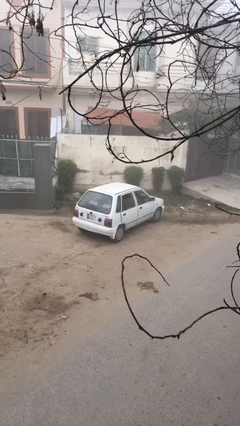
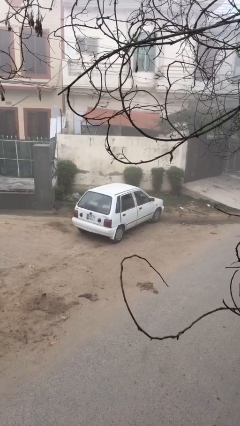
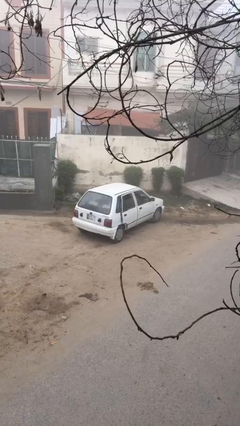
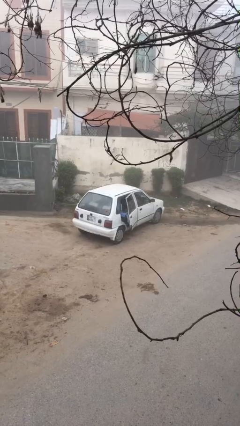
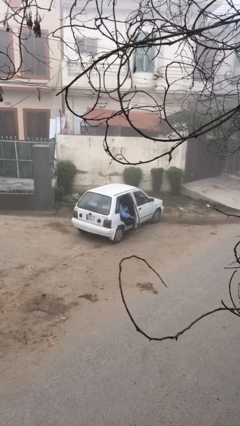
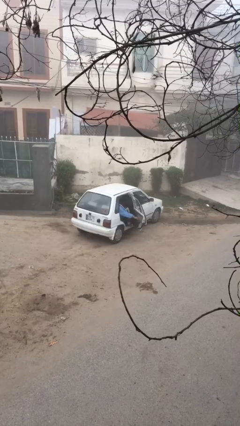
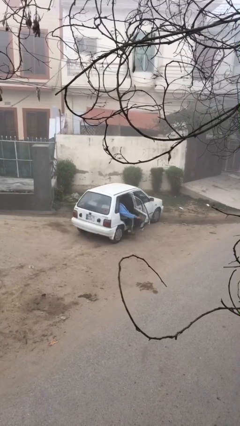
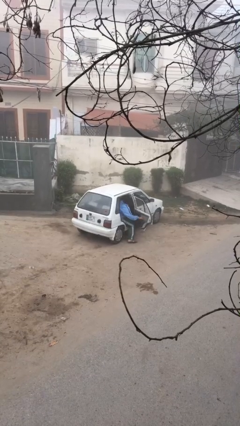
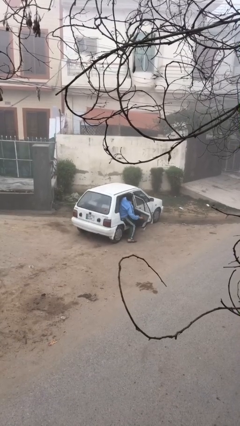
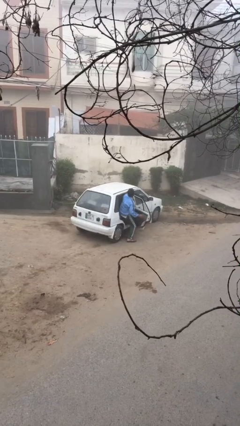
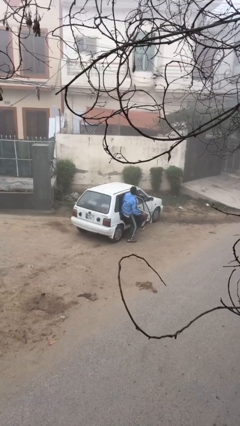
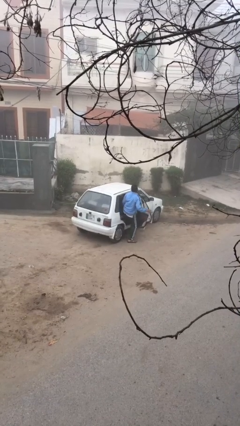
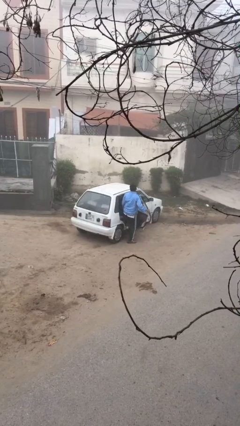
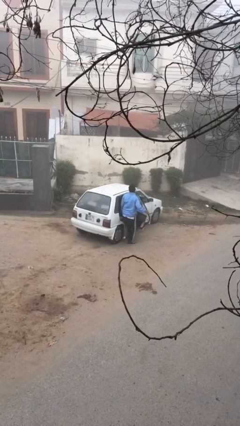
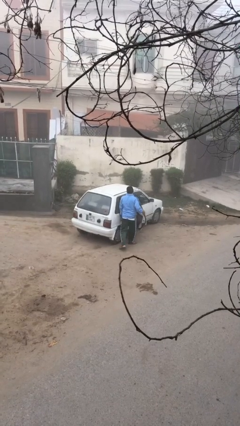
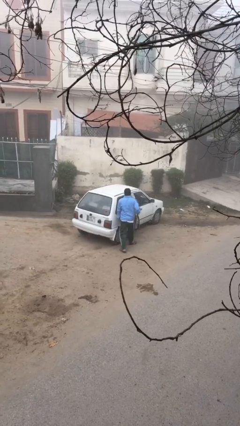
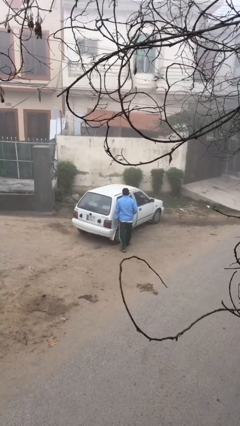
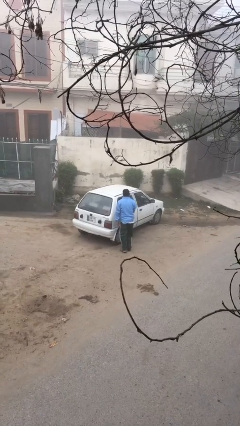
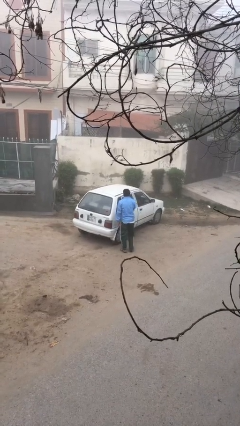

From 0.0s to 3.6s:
car drops off person

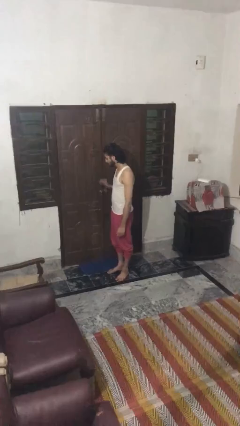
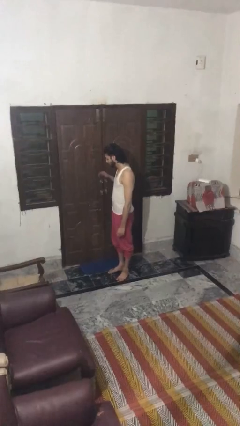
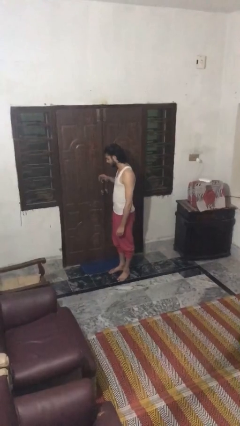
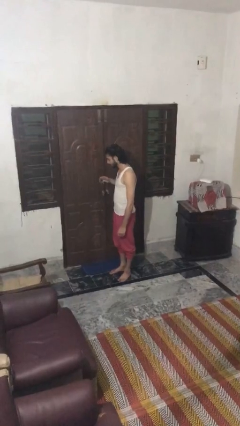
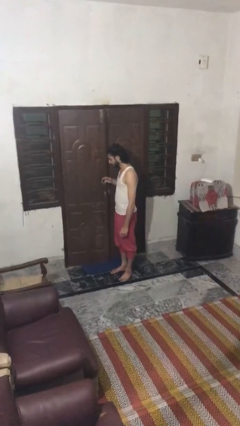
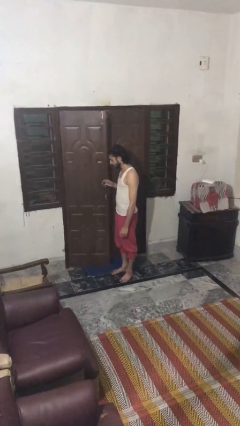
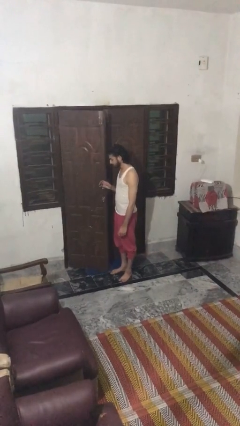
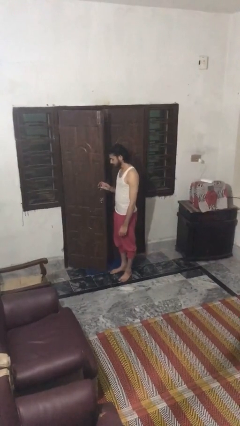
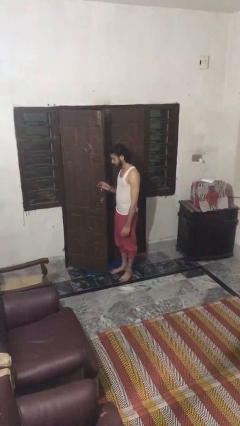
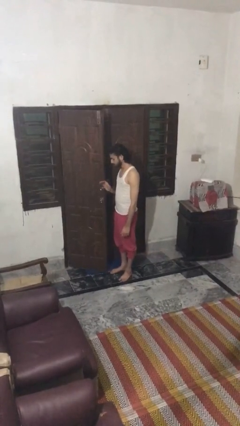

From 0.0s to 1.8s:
person opens facility door

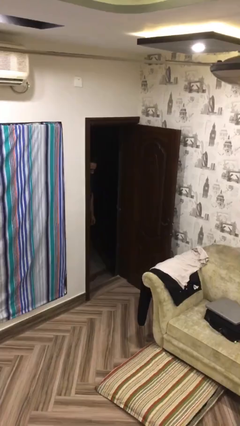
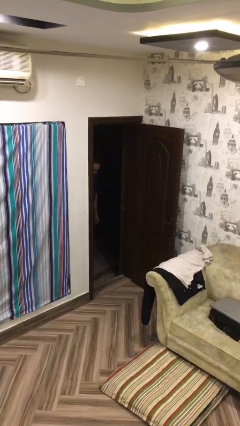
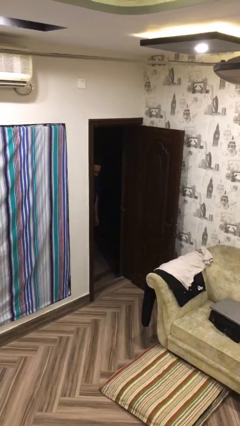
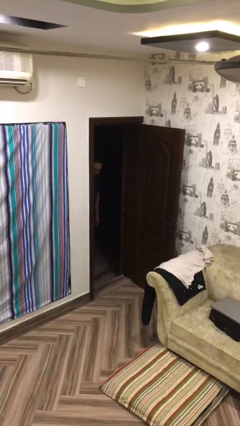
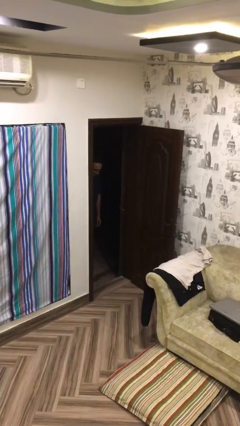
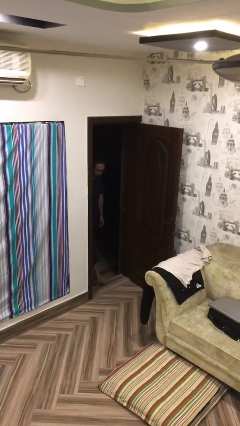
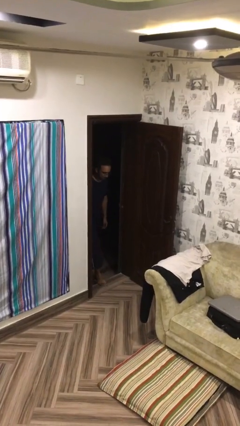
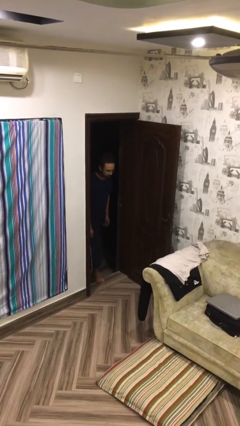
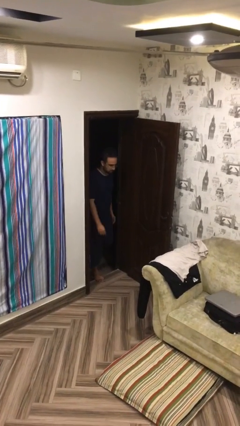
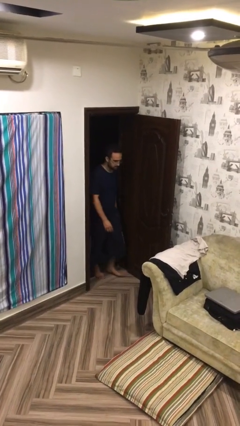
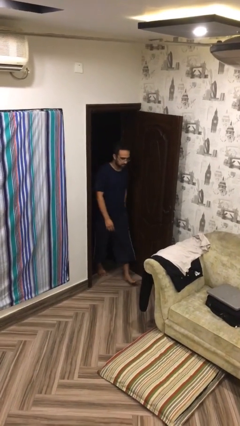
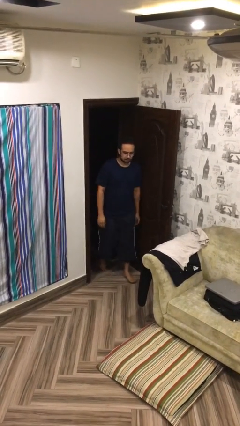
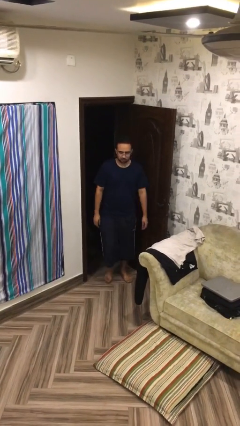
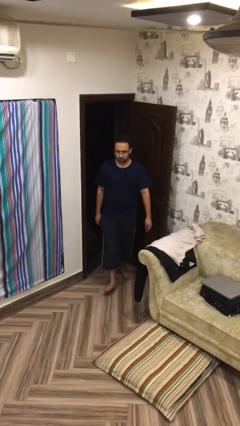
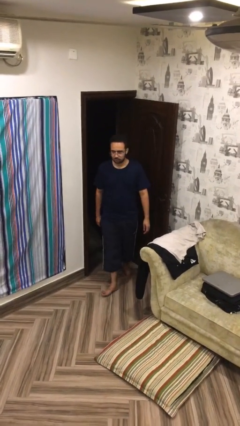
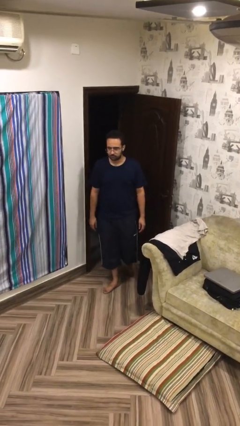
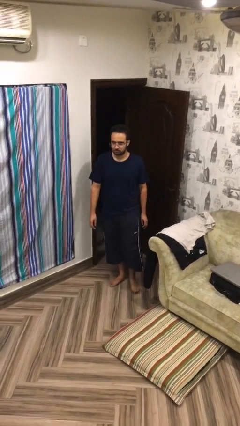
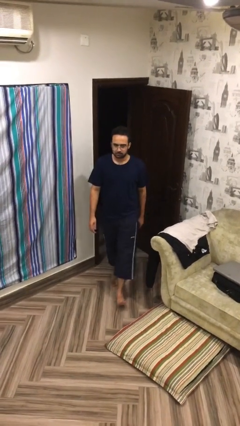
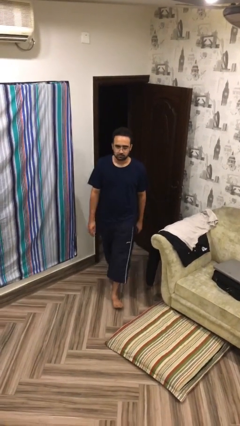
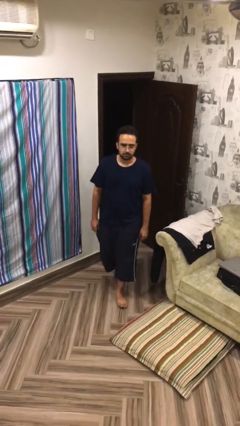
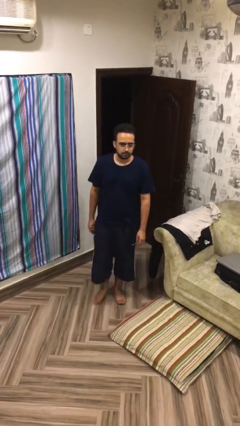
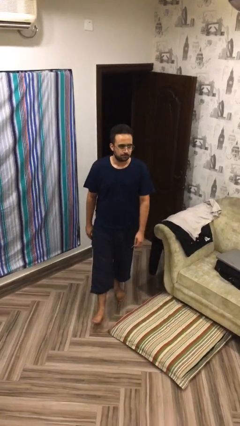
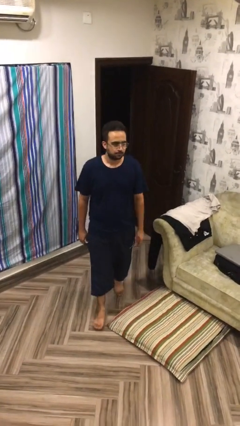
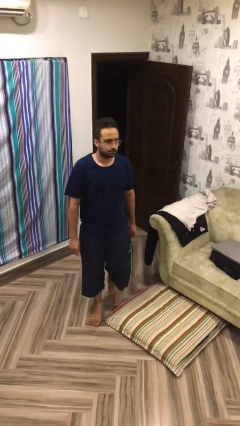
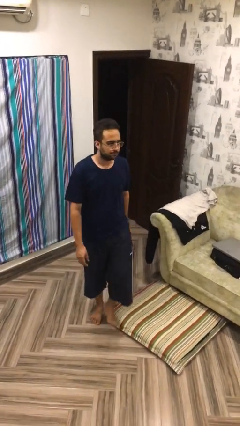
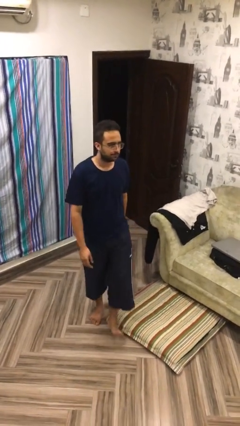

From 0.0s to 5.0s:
person enters scene through structure

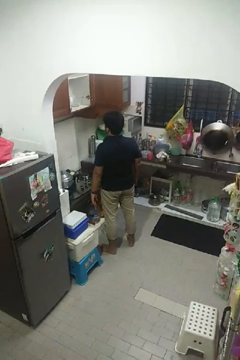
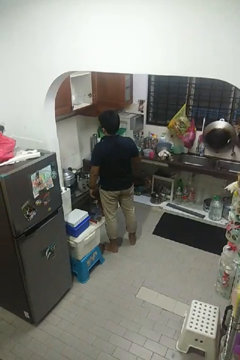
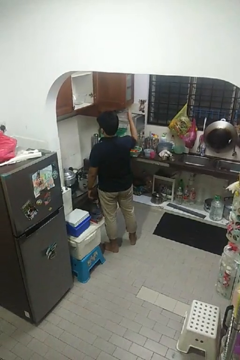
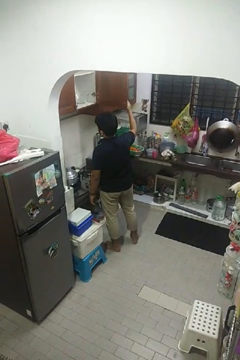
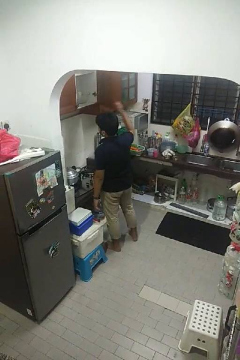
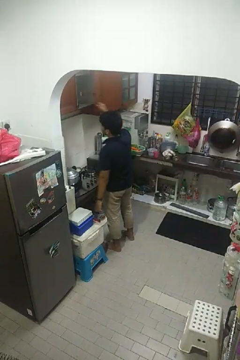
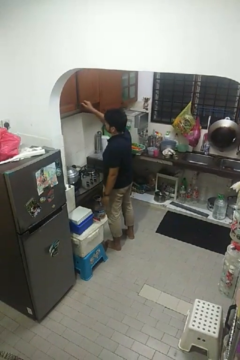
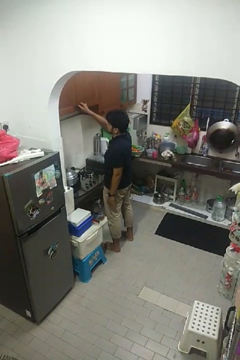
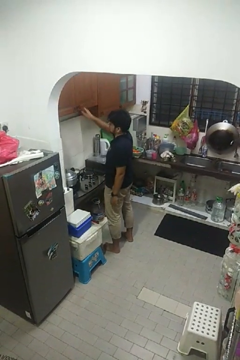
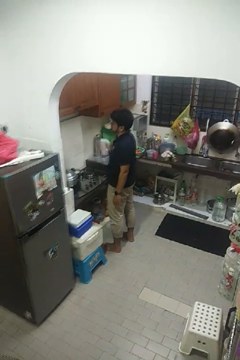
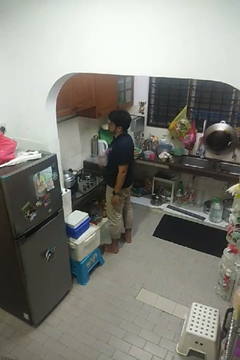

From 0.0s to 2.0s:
person closes cabinet

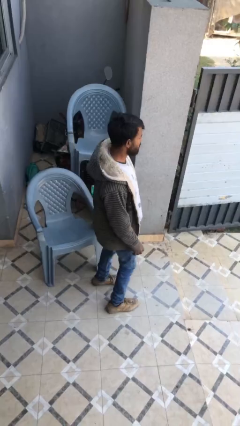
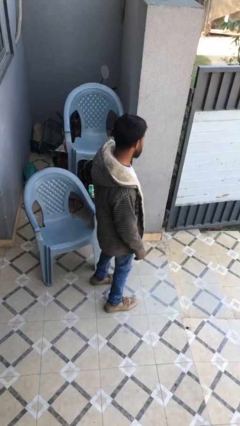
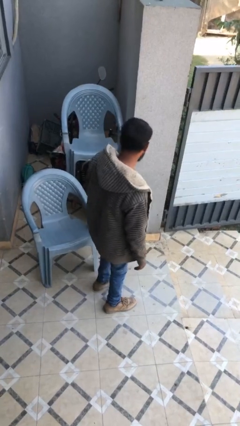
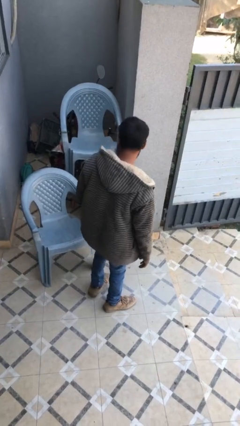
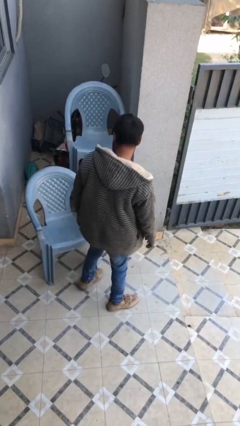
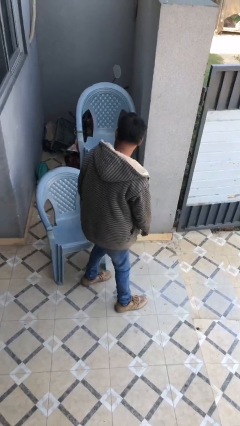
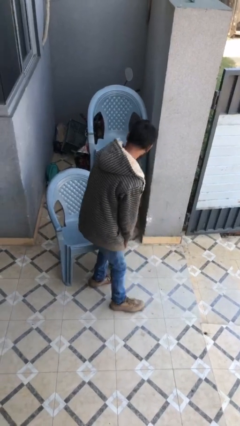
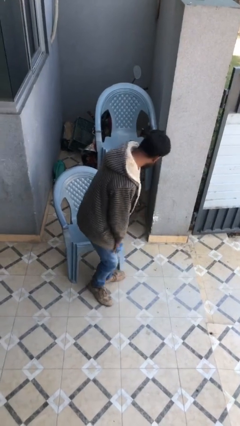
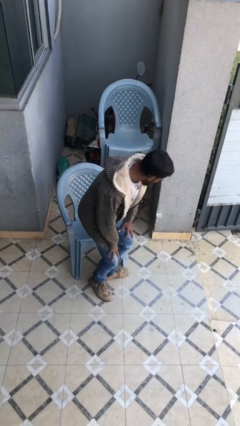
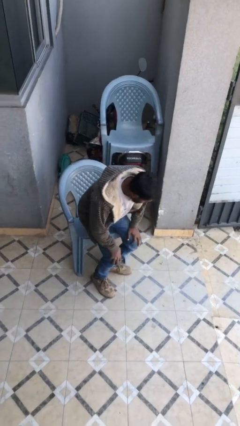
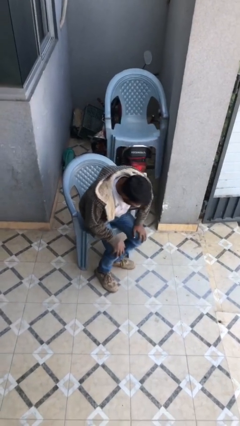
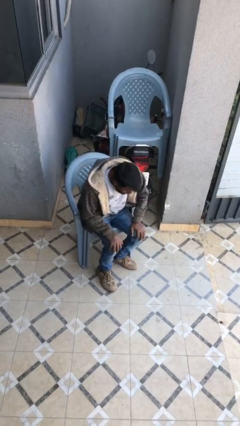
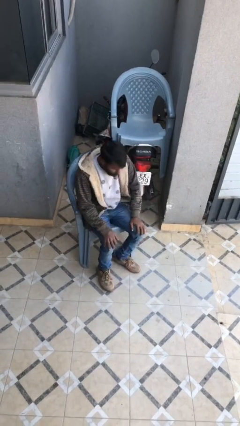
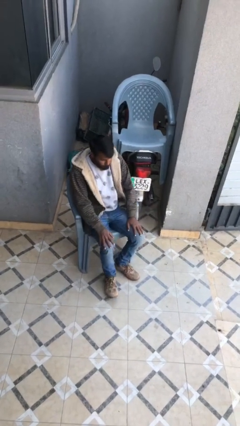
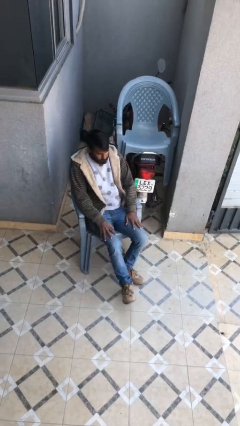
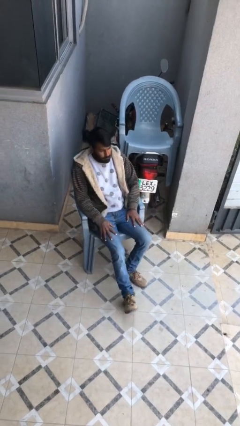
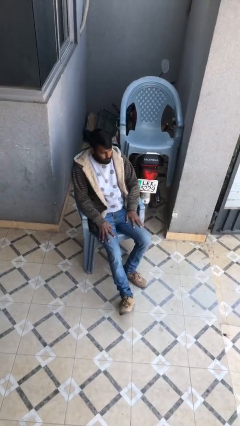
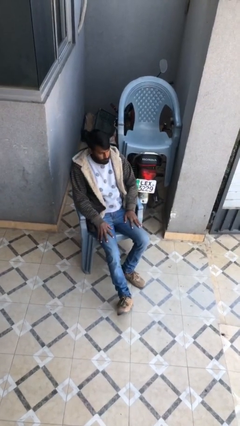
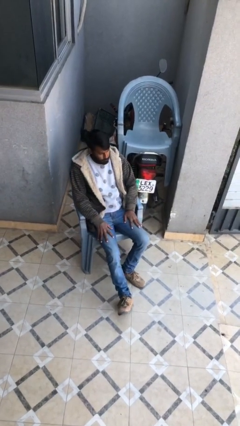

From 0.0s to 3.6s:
person sits down

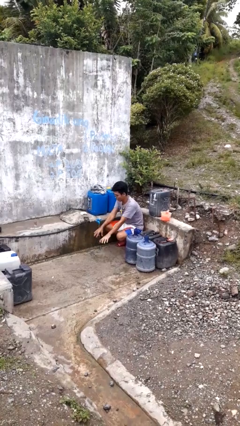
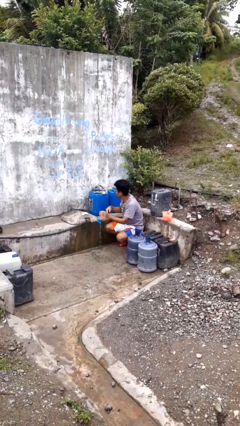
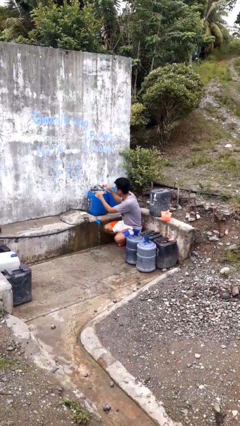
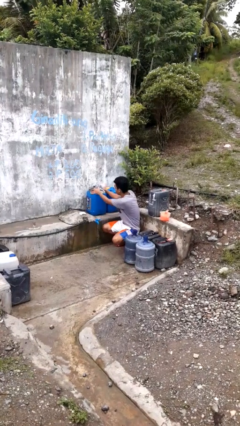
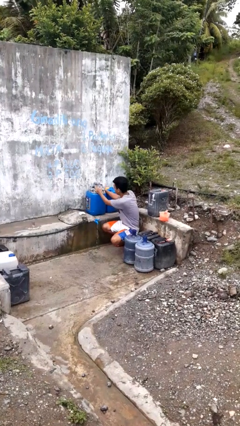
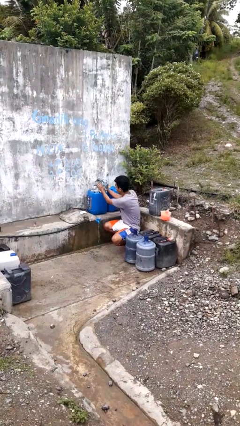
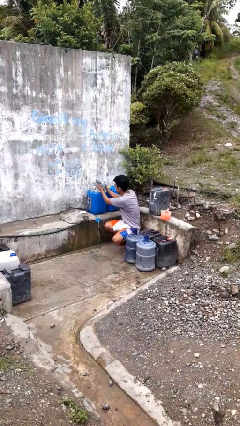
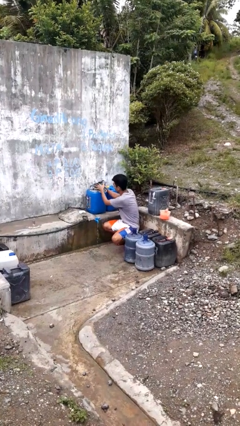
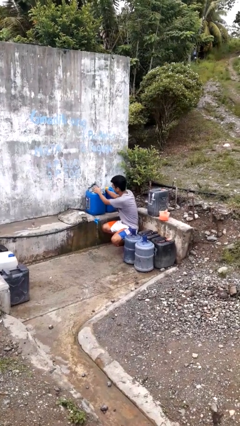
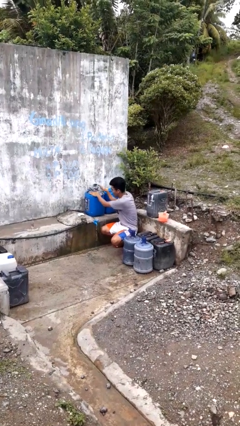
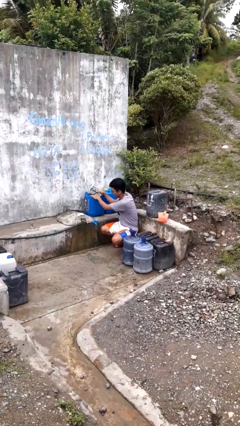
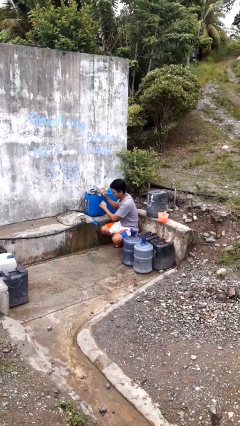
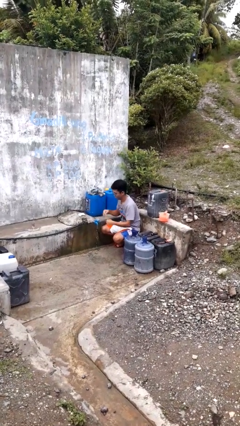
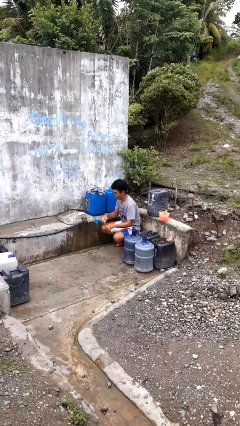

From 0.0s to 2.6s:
person dries hands with towel
